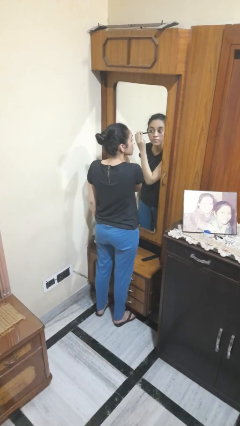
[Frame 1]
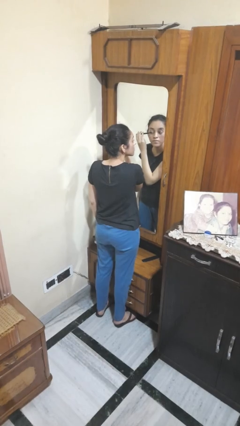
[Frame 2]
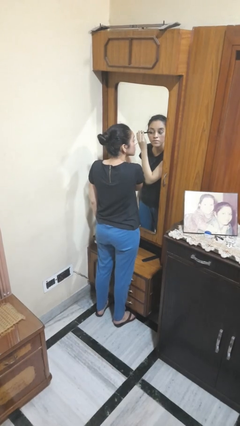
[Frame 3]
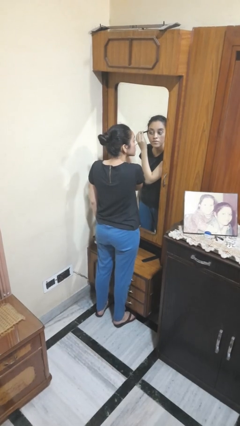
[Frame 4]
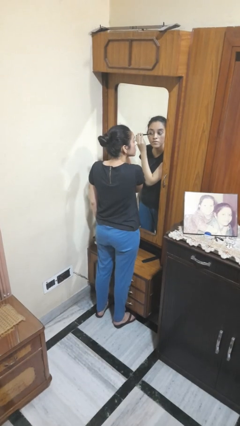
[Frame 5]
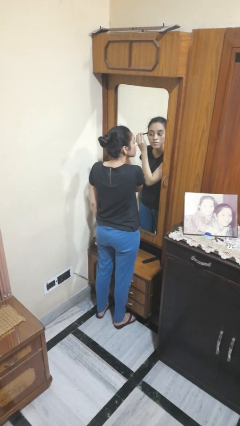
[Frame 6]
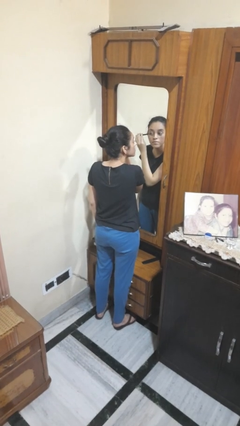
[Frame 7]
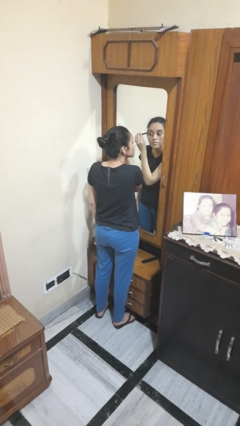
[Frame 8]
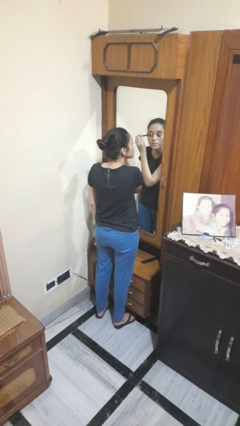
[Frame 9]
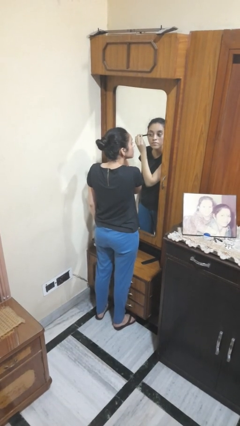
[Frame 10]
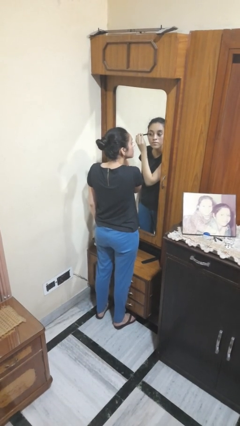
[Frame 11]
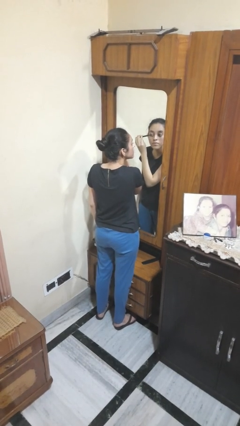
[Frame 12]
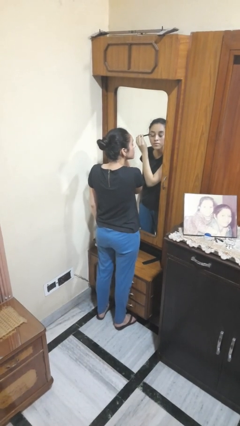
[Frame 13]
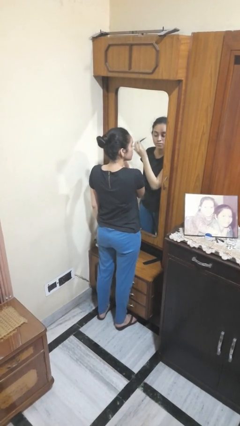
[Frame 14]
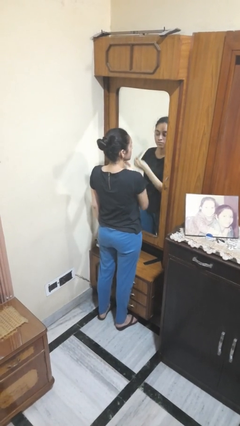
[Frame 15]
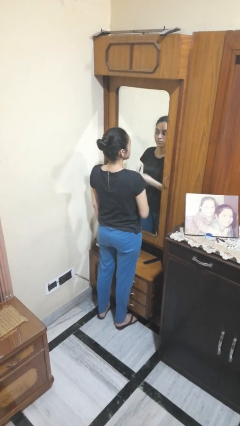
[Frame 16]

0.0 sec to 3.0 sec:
person applies eye makeup

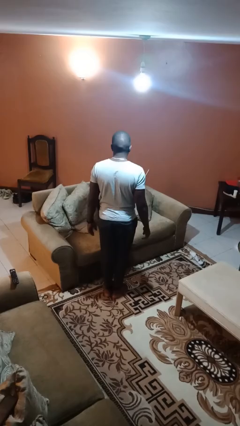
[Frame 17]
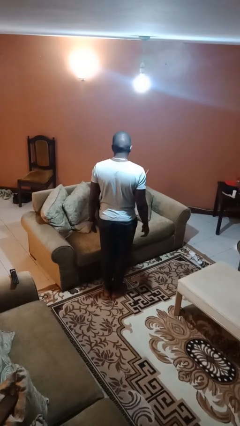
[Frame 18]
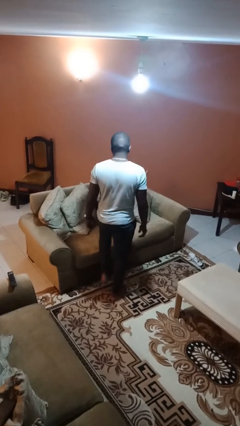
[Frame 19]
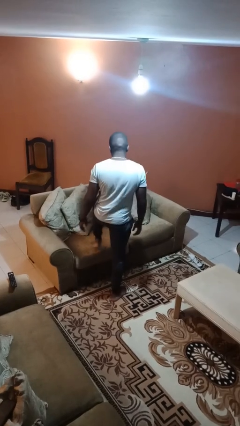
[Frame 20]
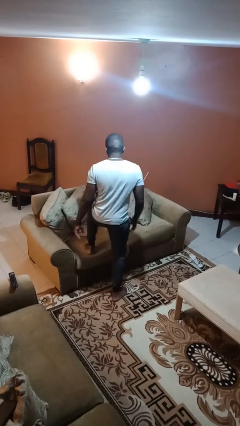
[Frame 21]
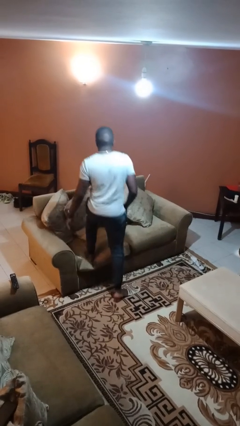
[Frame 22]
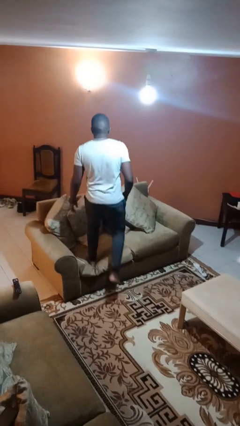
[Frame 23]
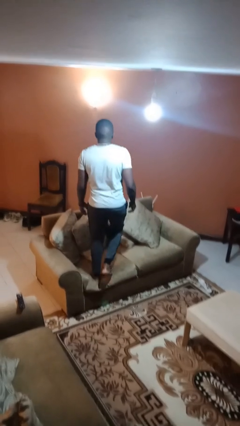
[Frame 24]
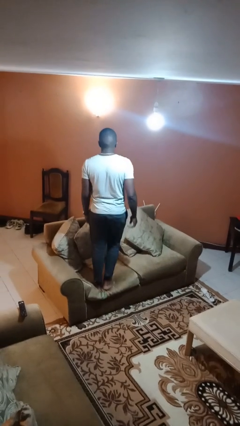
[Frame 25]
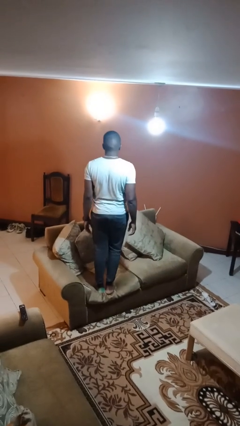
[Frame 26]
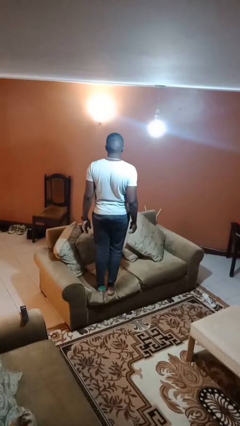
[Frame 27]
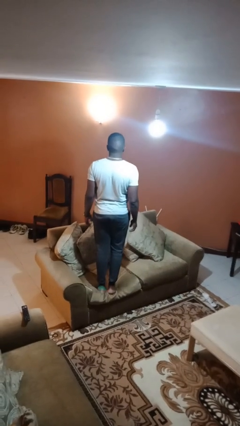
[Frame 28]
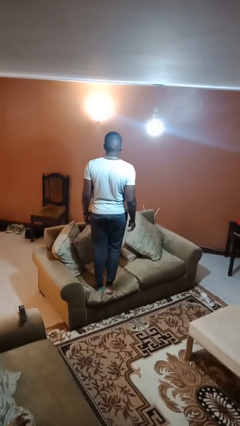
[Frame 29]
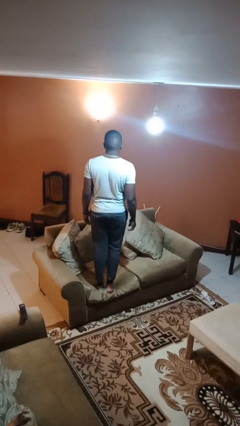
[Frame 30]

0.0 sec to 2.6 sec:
person climbs on couch

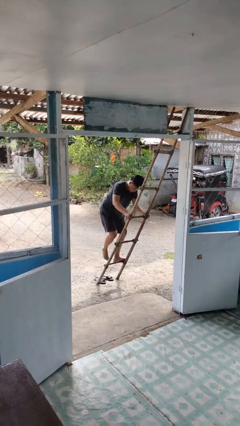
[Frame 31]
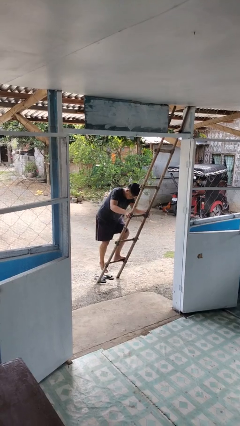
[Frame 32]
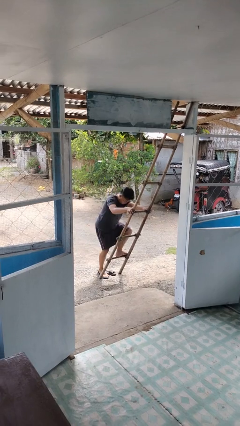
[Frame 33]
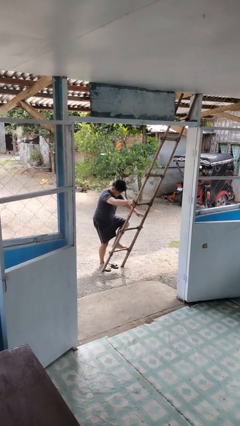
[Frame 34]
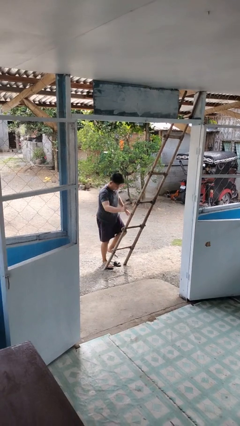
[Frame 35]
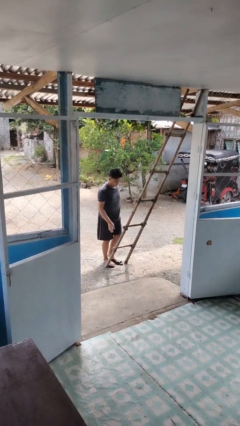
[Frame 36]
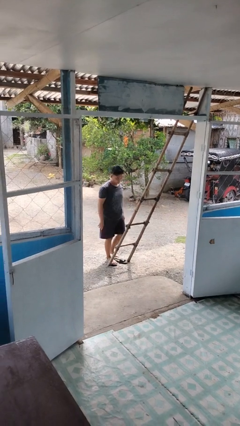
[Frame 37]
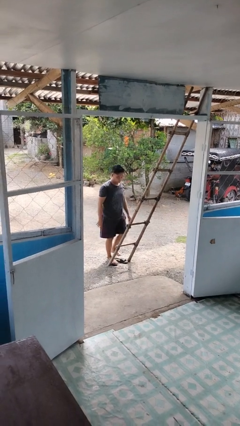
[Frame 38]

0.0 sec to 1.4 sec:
person climbs down ladder

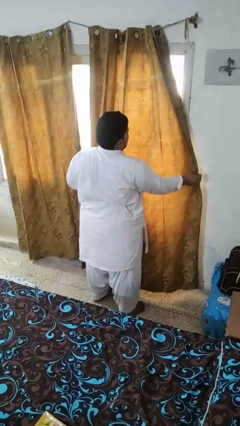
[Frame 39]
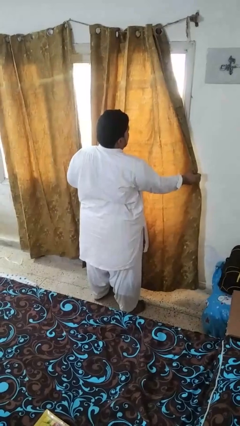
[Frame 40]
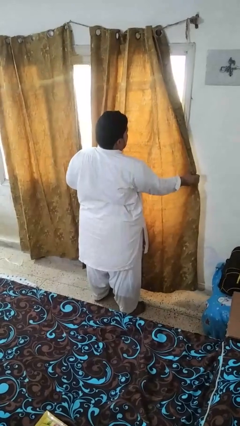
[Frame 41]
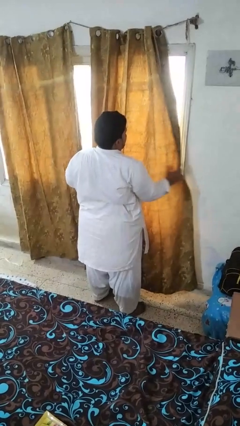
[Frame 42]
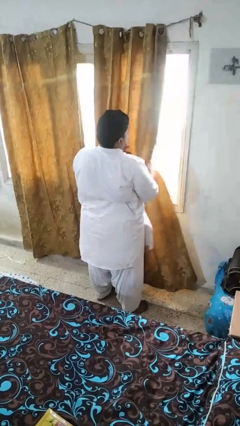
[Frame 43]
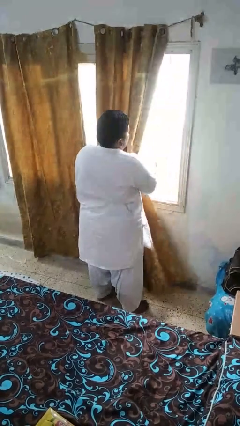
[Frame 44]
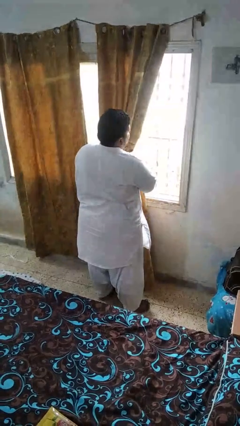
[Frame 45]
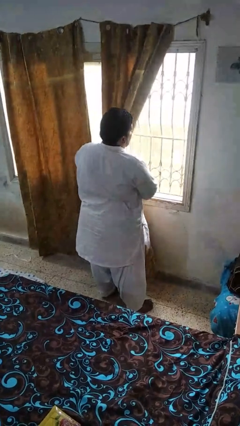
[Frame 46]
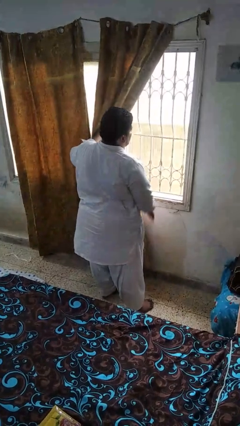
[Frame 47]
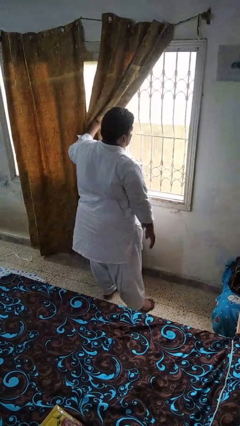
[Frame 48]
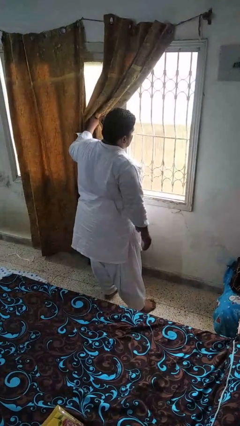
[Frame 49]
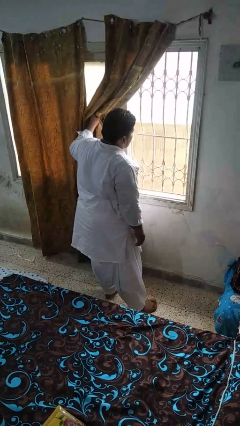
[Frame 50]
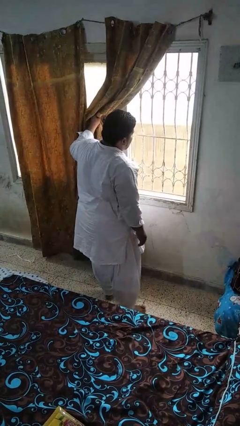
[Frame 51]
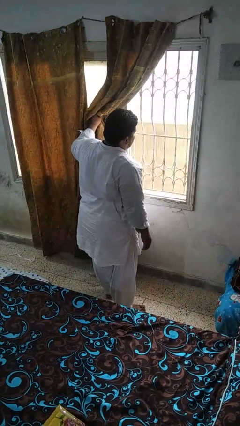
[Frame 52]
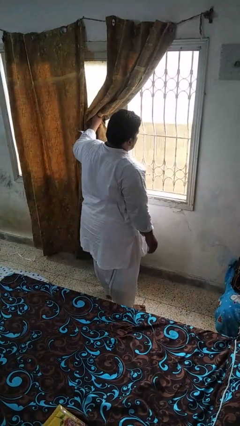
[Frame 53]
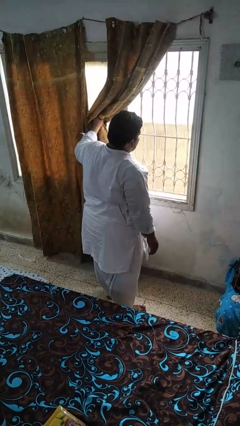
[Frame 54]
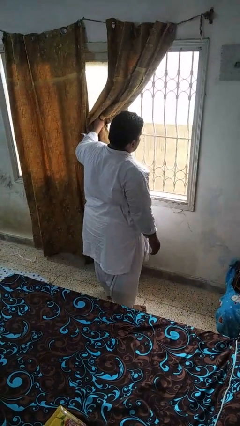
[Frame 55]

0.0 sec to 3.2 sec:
person opens curtains

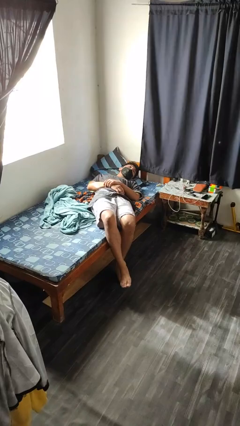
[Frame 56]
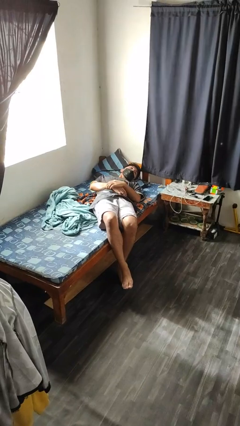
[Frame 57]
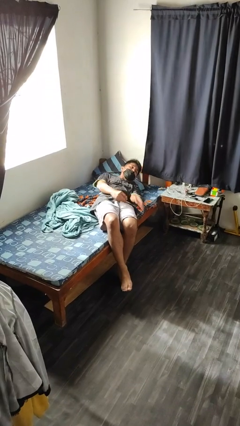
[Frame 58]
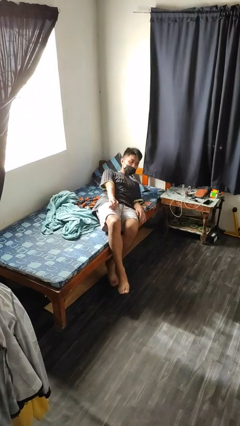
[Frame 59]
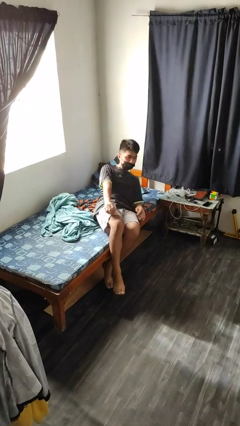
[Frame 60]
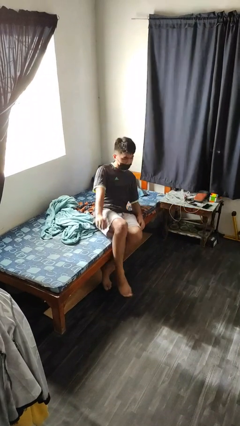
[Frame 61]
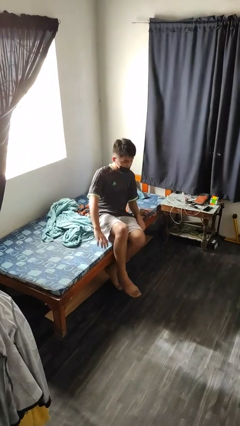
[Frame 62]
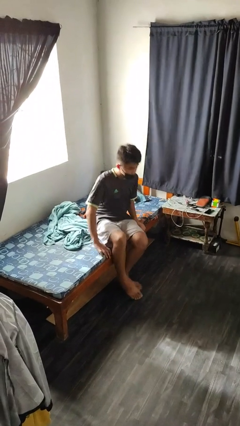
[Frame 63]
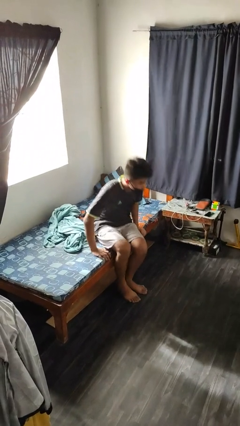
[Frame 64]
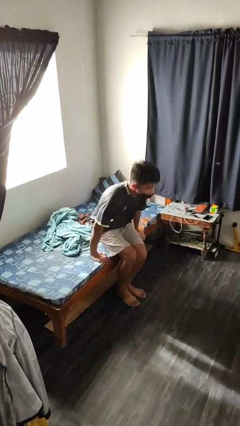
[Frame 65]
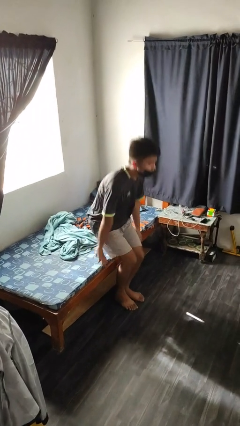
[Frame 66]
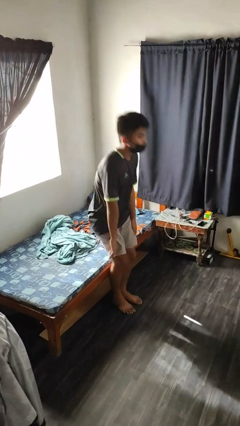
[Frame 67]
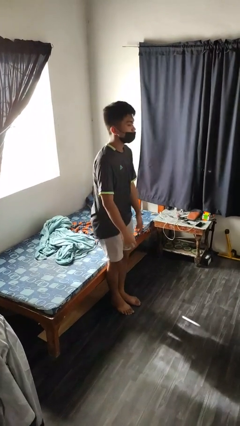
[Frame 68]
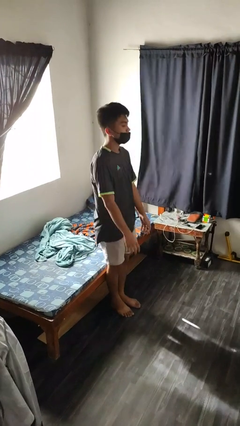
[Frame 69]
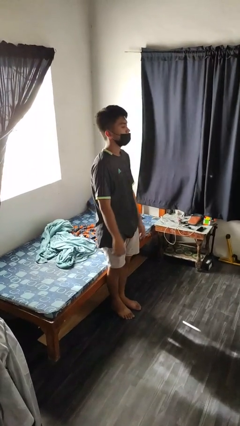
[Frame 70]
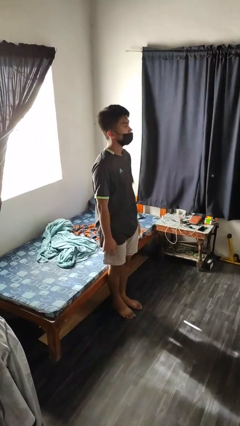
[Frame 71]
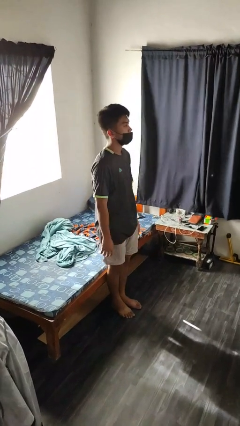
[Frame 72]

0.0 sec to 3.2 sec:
person stands up

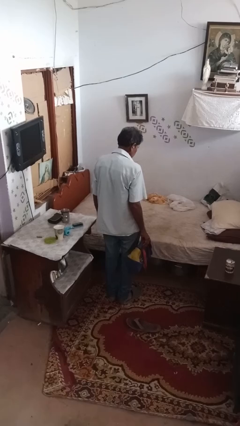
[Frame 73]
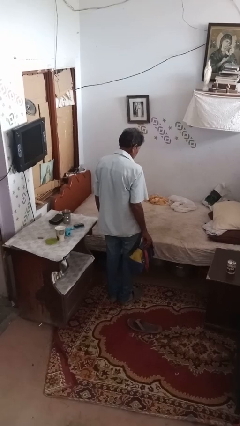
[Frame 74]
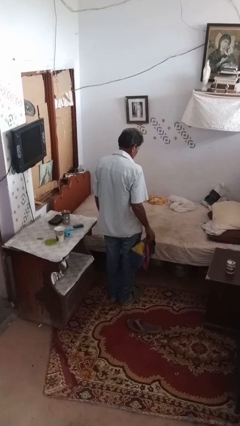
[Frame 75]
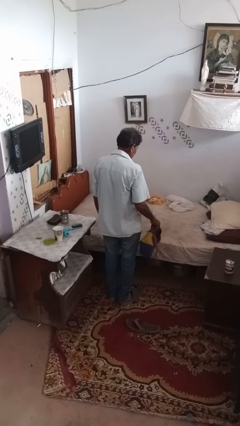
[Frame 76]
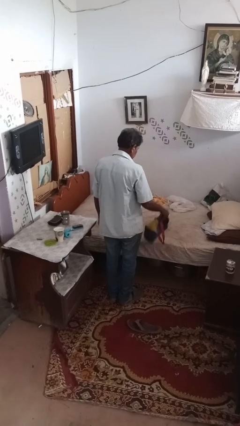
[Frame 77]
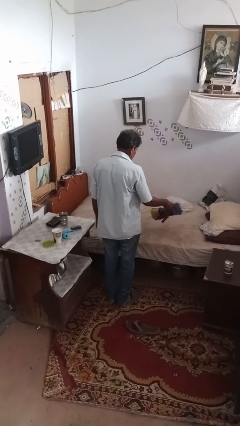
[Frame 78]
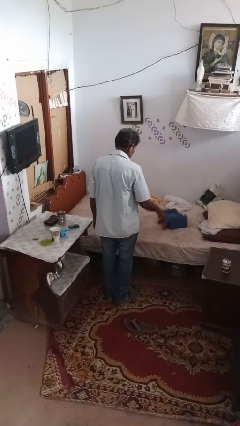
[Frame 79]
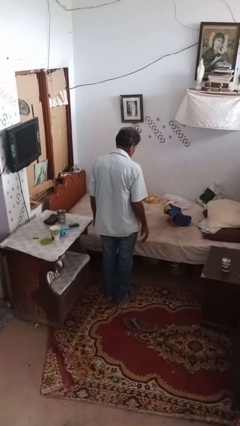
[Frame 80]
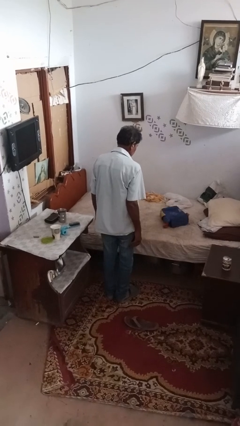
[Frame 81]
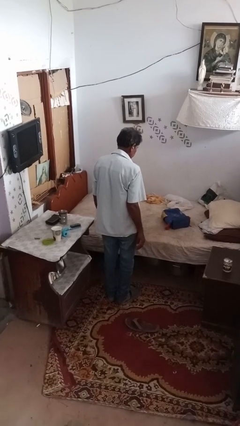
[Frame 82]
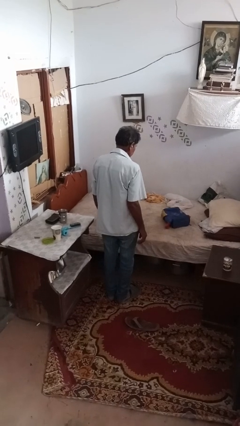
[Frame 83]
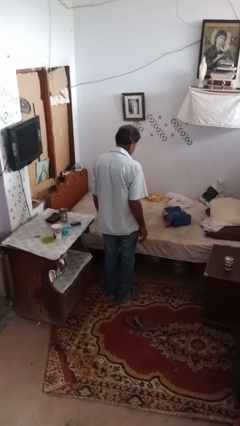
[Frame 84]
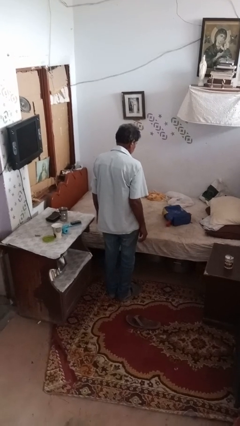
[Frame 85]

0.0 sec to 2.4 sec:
person throws object on bed

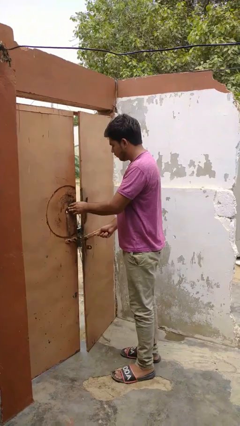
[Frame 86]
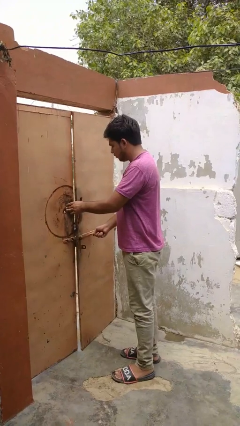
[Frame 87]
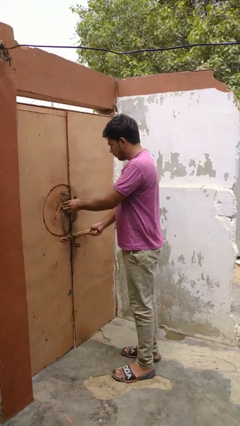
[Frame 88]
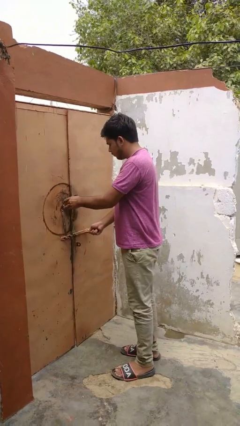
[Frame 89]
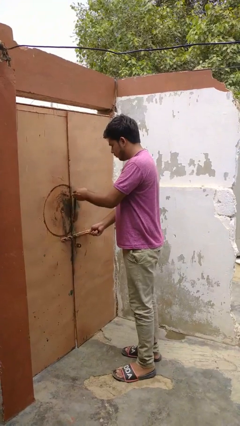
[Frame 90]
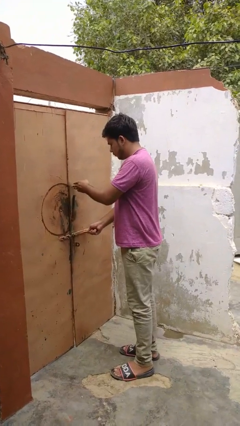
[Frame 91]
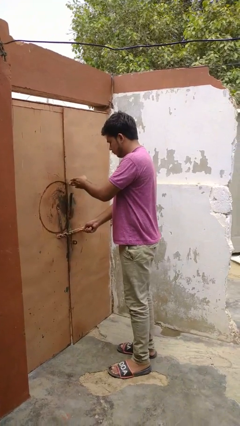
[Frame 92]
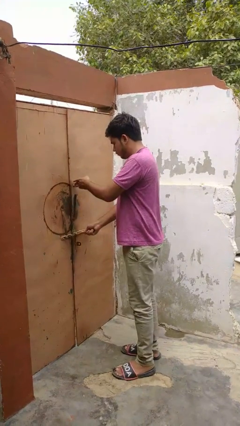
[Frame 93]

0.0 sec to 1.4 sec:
person closes facility door

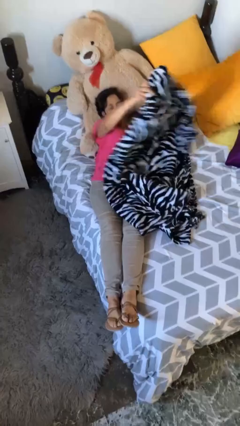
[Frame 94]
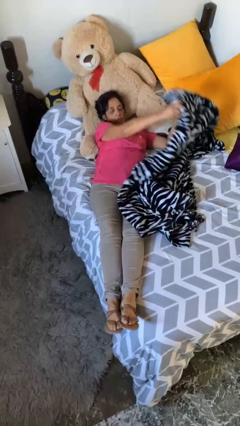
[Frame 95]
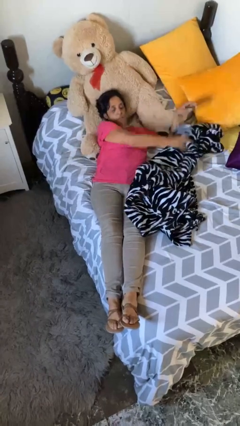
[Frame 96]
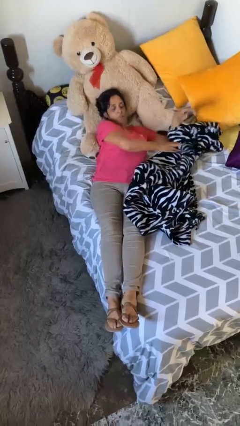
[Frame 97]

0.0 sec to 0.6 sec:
person uncovers with bedsheets
